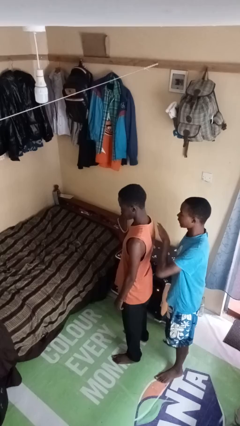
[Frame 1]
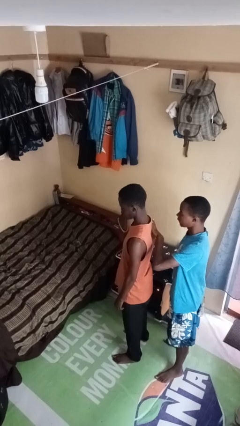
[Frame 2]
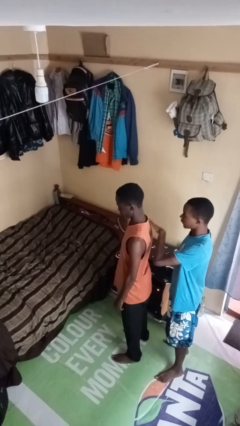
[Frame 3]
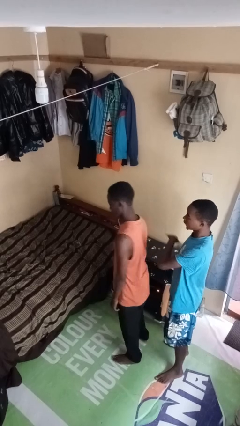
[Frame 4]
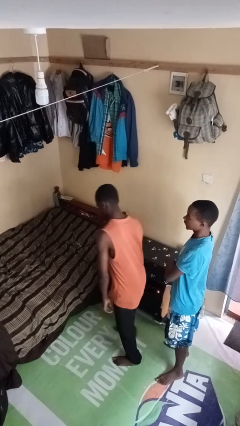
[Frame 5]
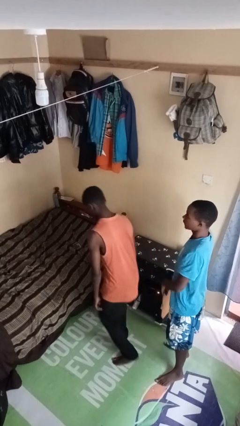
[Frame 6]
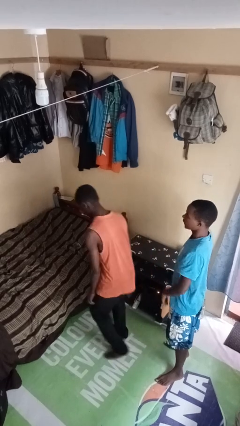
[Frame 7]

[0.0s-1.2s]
person shoves person

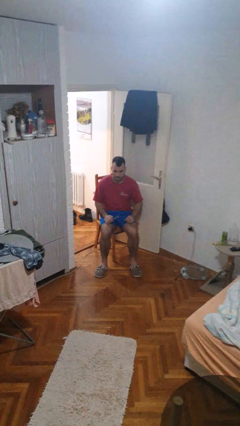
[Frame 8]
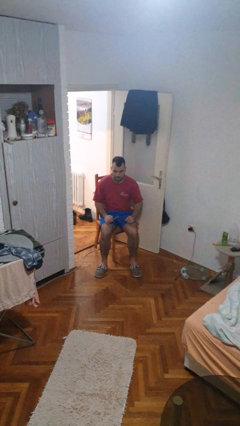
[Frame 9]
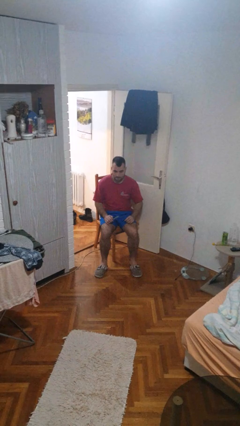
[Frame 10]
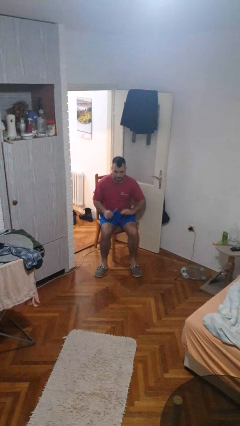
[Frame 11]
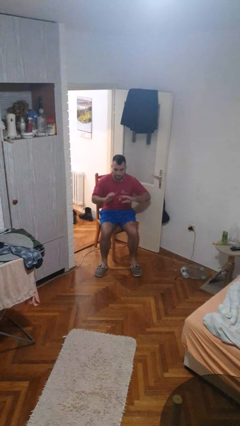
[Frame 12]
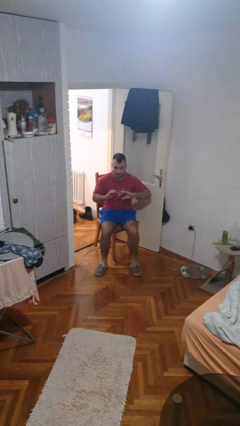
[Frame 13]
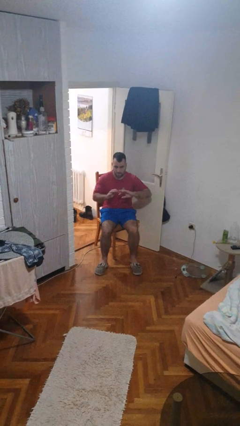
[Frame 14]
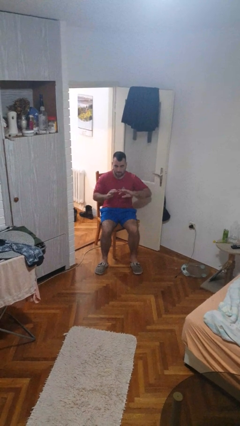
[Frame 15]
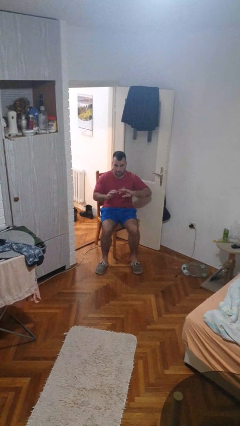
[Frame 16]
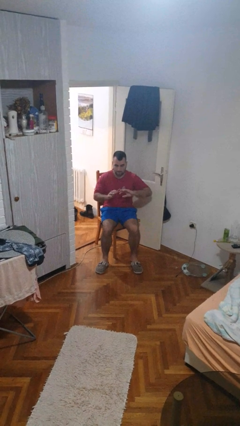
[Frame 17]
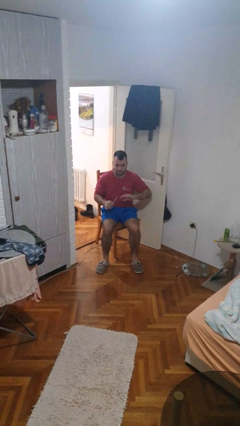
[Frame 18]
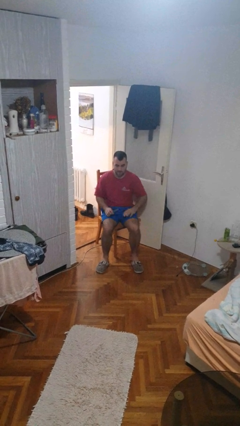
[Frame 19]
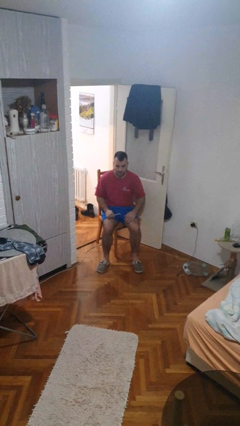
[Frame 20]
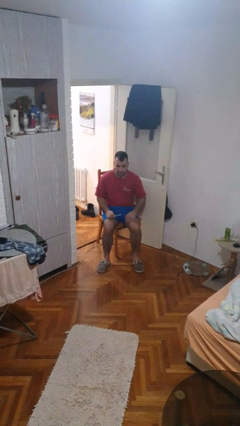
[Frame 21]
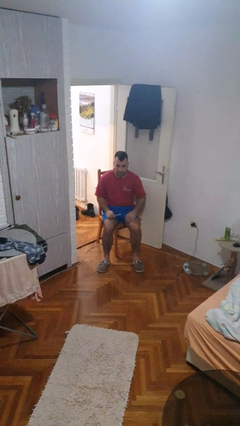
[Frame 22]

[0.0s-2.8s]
person files fingernails

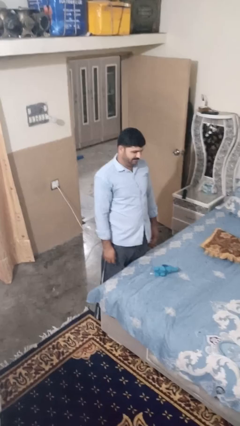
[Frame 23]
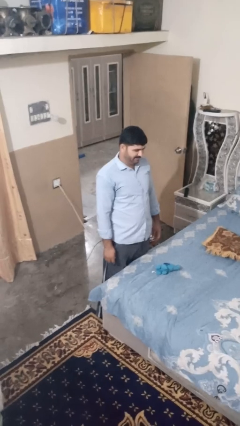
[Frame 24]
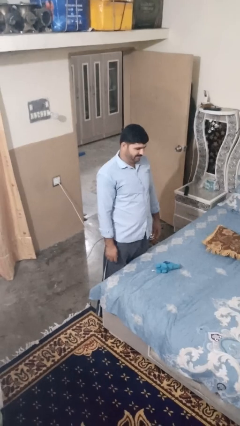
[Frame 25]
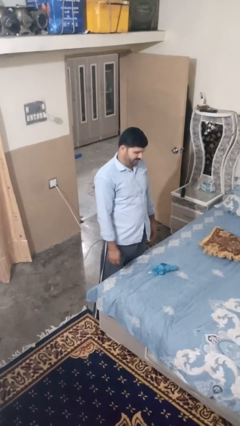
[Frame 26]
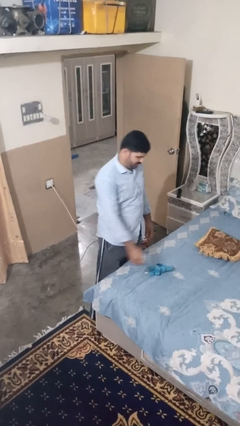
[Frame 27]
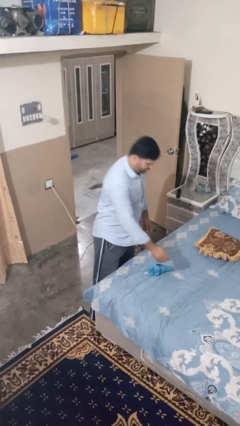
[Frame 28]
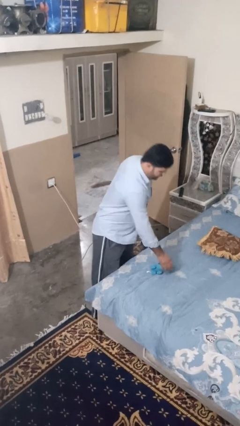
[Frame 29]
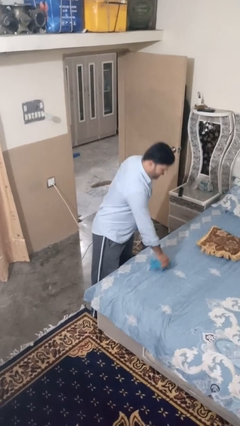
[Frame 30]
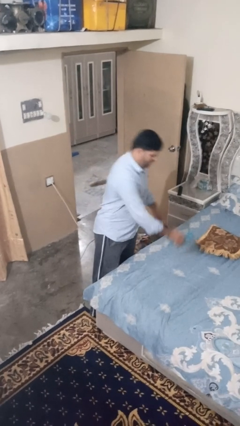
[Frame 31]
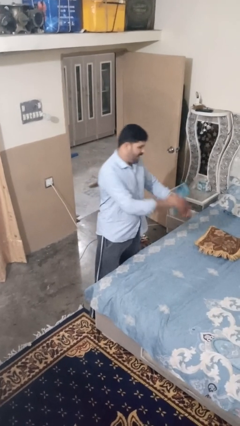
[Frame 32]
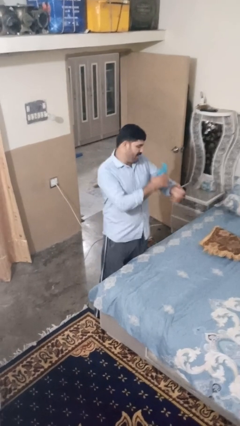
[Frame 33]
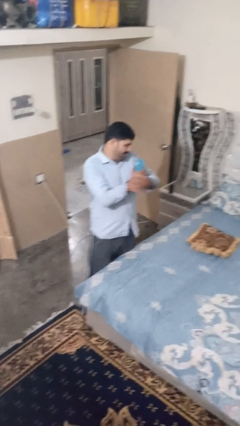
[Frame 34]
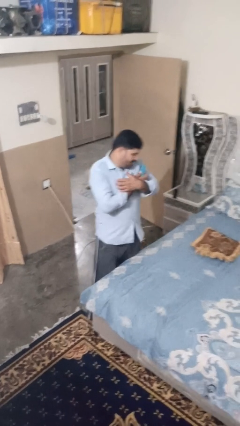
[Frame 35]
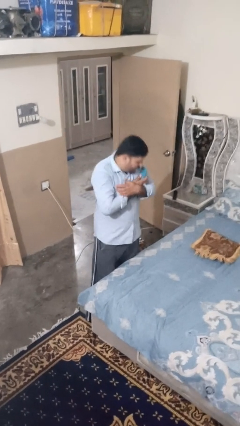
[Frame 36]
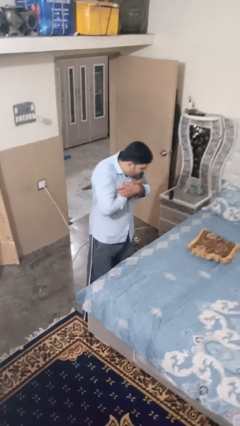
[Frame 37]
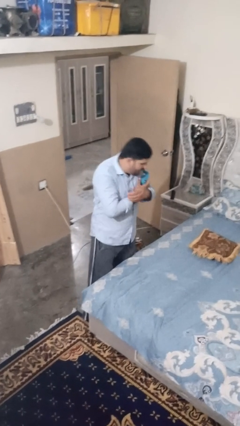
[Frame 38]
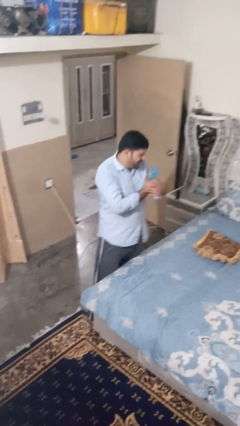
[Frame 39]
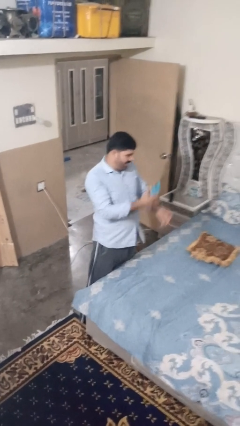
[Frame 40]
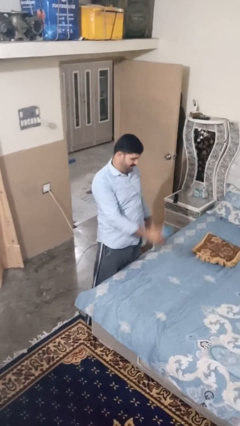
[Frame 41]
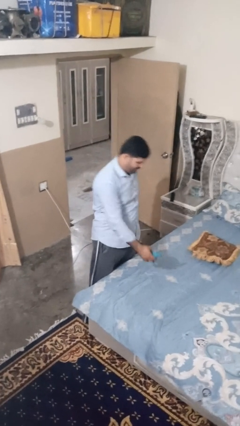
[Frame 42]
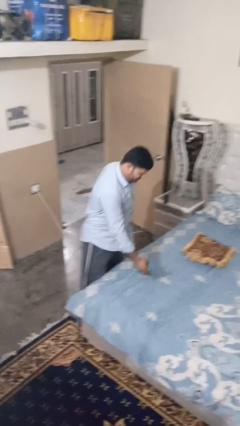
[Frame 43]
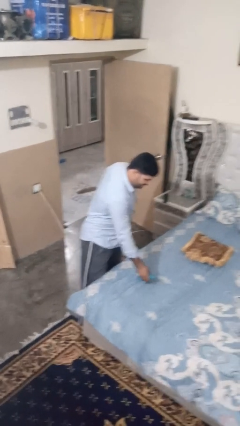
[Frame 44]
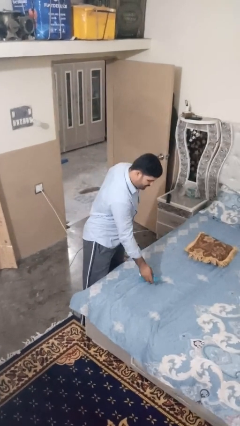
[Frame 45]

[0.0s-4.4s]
person hugs stuffed animal

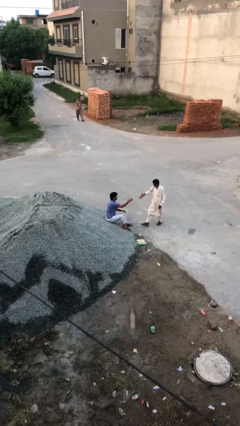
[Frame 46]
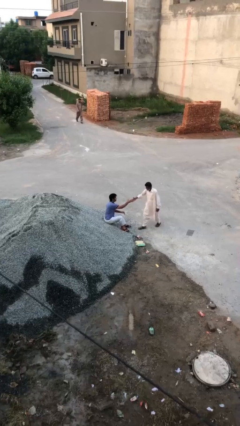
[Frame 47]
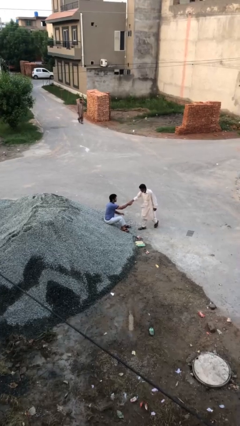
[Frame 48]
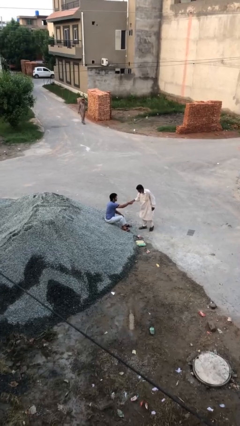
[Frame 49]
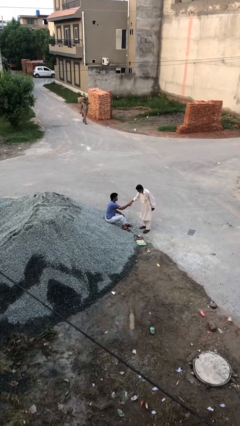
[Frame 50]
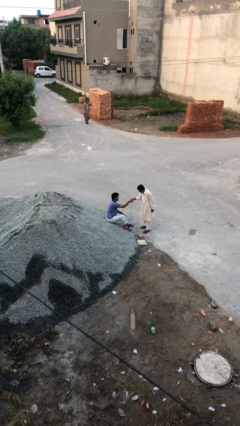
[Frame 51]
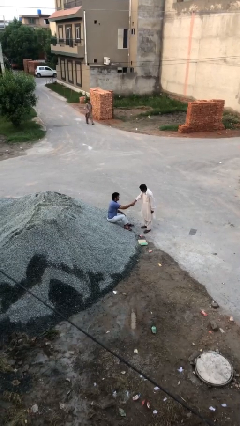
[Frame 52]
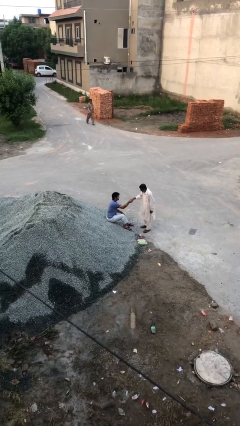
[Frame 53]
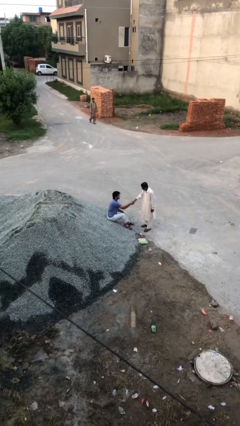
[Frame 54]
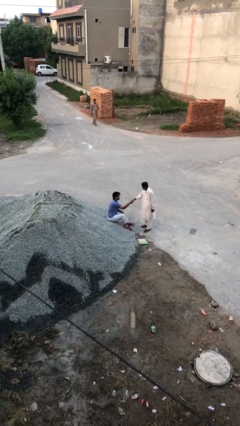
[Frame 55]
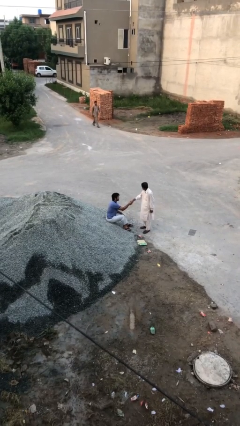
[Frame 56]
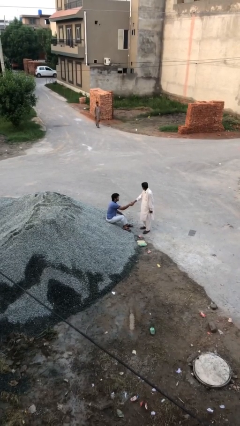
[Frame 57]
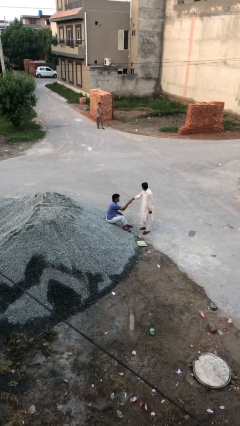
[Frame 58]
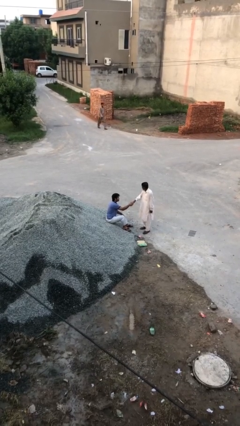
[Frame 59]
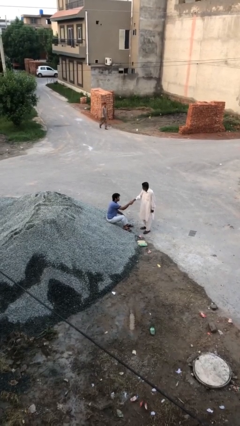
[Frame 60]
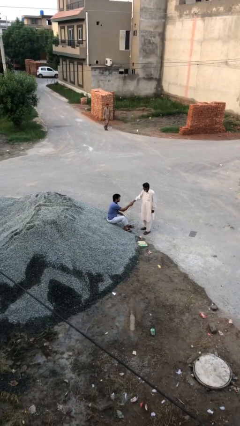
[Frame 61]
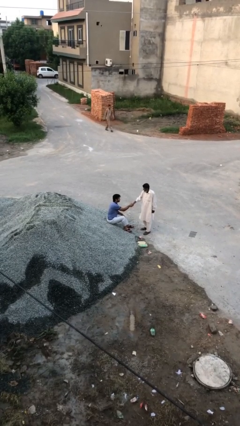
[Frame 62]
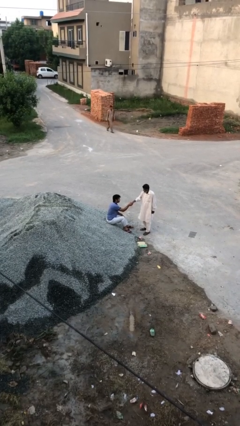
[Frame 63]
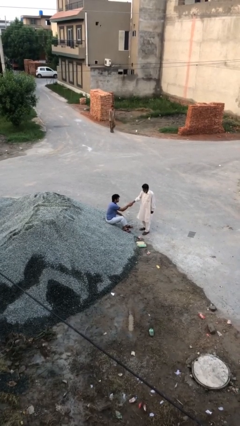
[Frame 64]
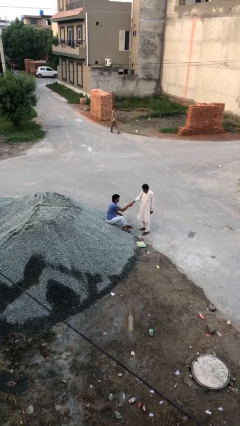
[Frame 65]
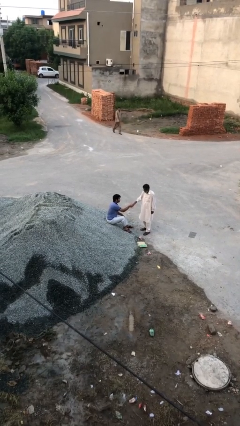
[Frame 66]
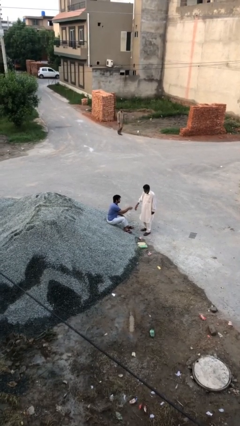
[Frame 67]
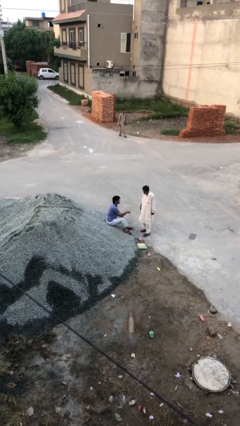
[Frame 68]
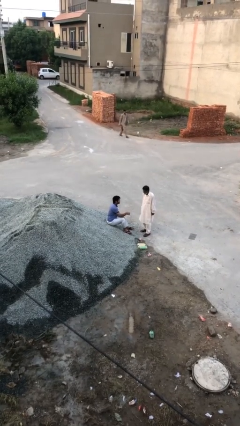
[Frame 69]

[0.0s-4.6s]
person shakes hand

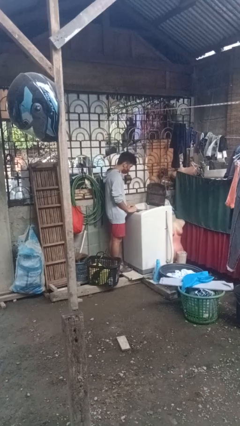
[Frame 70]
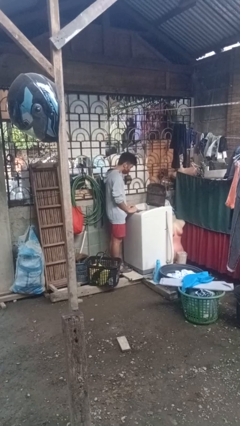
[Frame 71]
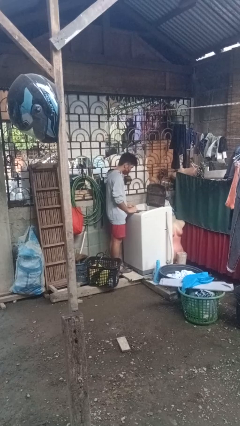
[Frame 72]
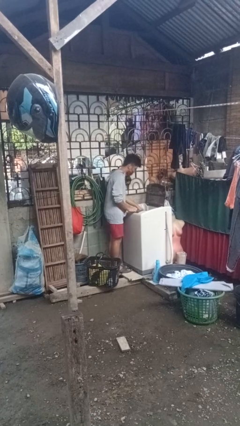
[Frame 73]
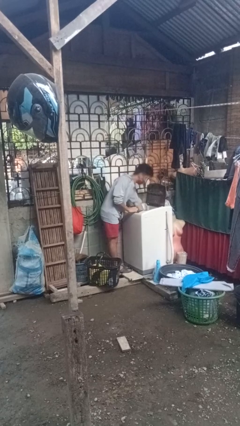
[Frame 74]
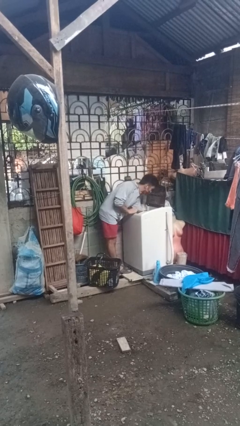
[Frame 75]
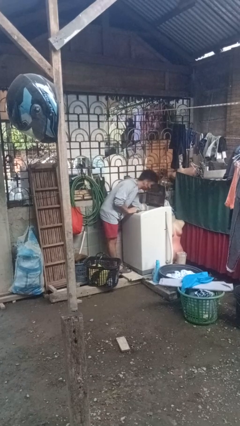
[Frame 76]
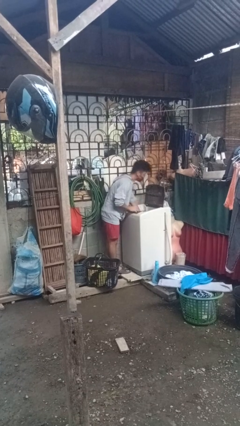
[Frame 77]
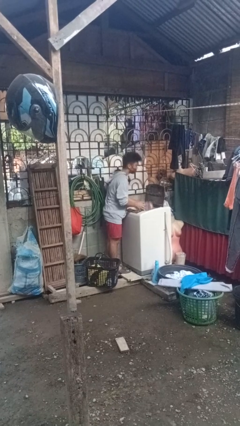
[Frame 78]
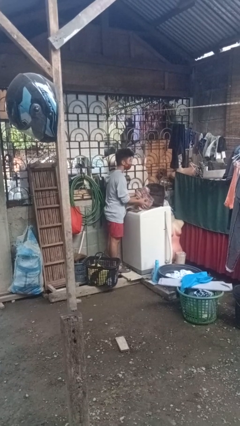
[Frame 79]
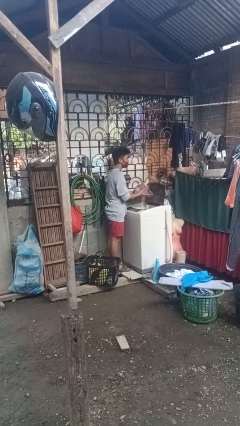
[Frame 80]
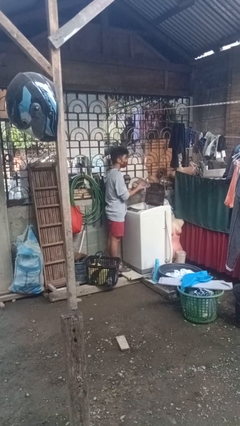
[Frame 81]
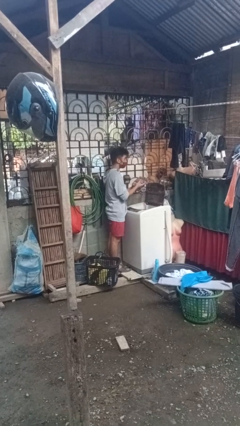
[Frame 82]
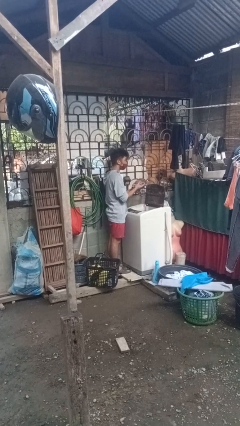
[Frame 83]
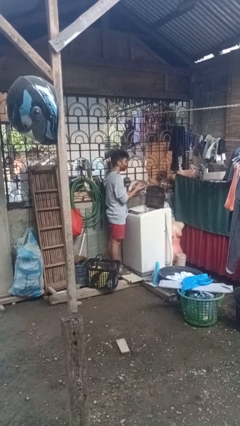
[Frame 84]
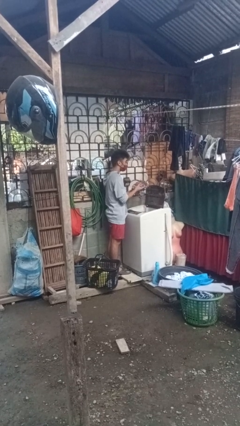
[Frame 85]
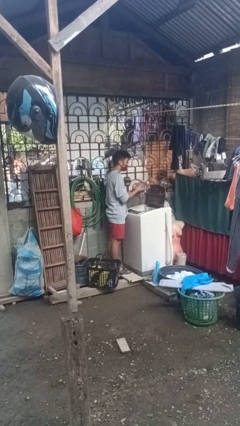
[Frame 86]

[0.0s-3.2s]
person unloads clotheswasher

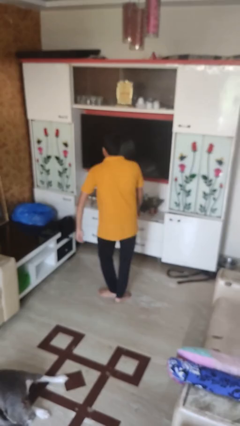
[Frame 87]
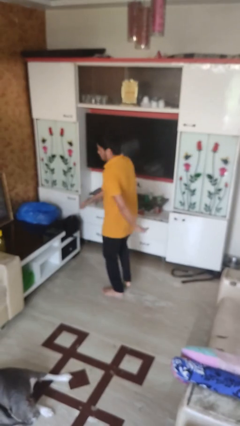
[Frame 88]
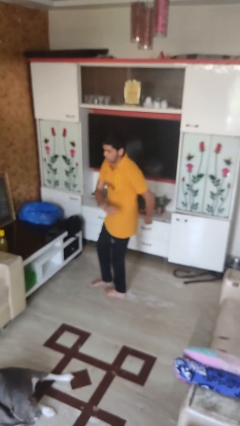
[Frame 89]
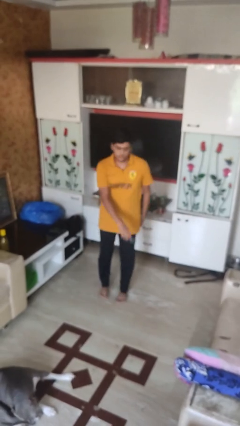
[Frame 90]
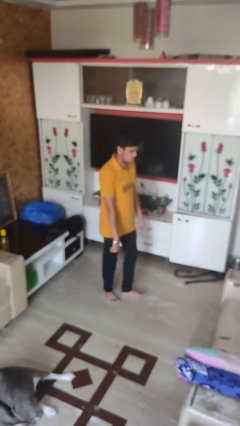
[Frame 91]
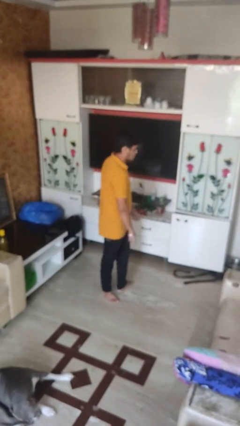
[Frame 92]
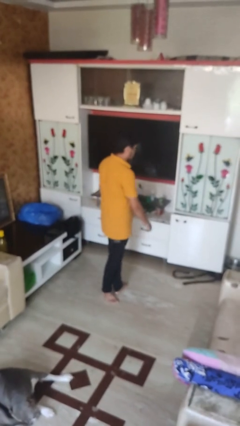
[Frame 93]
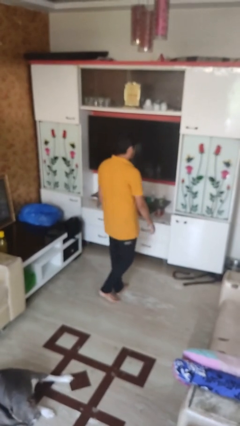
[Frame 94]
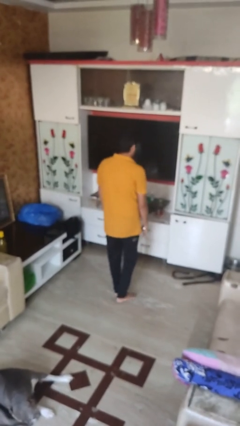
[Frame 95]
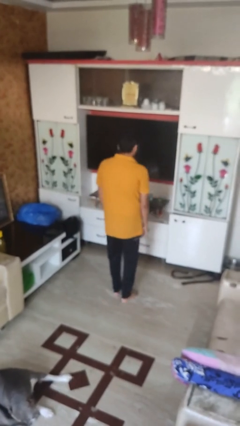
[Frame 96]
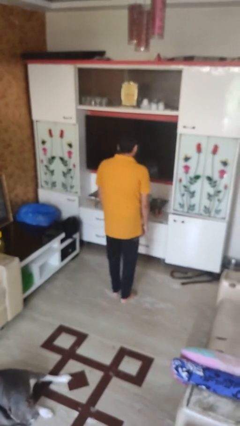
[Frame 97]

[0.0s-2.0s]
person twirls
